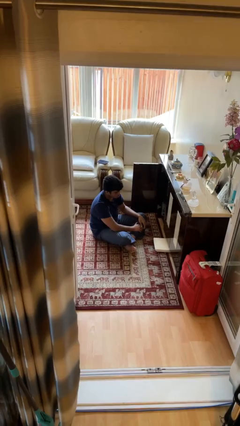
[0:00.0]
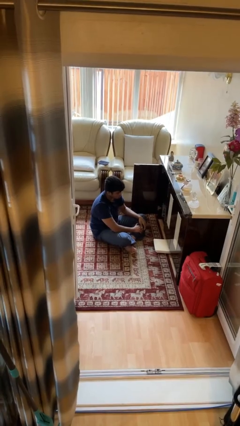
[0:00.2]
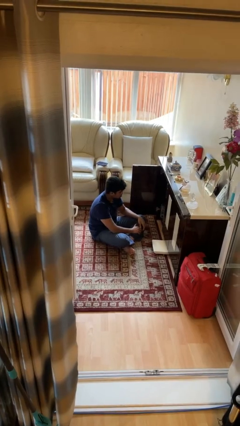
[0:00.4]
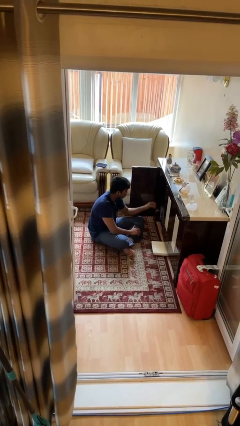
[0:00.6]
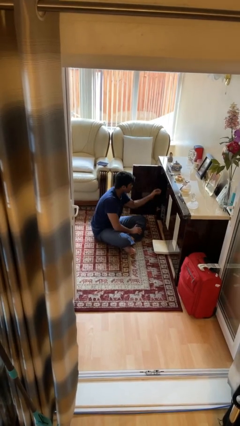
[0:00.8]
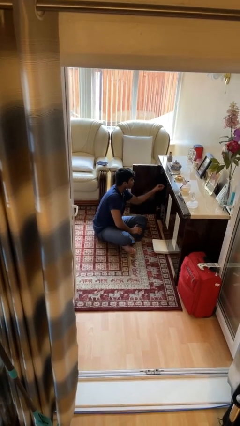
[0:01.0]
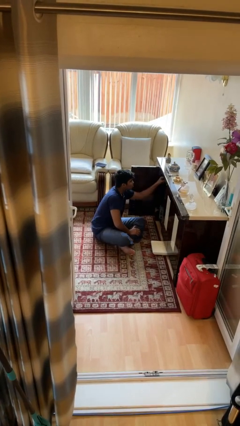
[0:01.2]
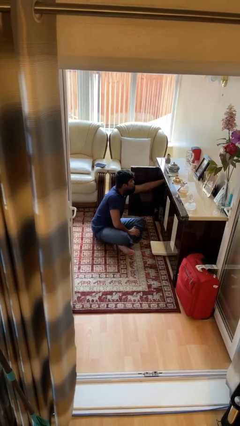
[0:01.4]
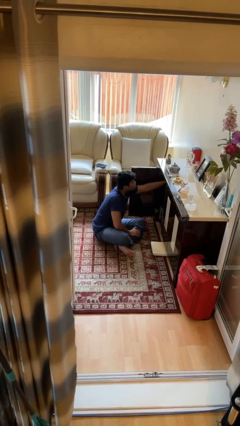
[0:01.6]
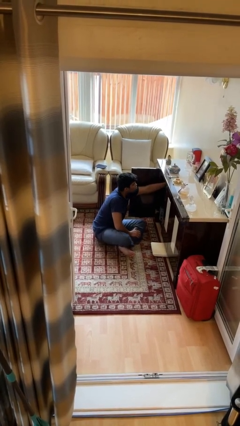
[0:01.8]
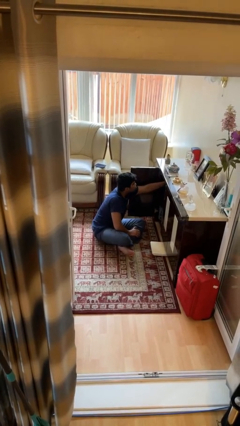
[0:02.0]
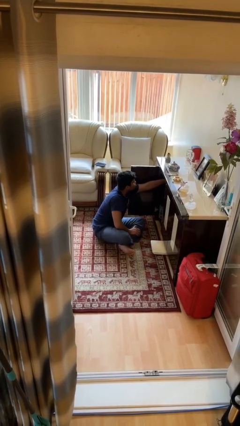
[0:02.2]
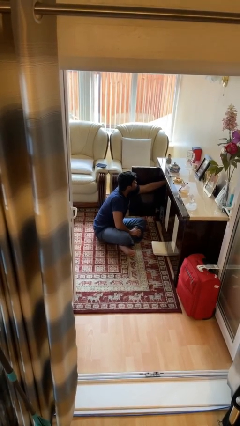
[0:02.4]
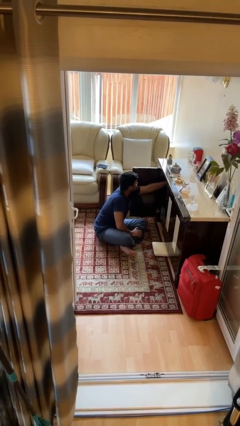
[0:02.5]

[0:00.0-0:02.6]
person searches in cabinet

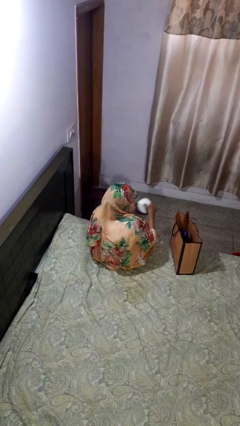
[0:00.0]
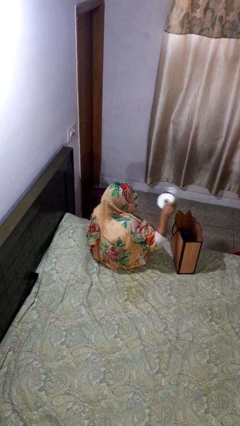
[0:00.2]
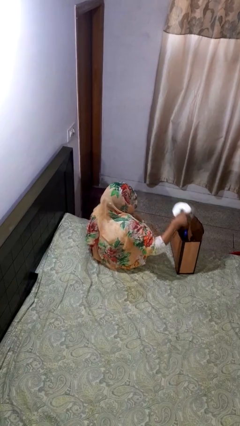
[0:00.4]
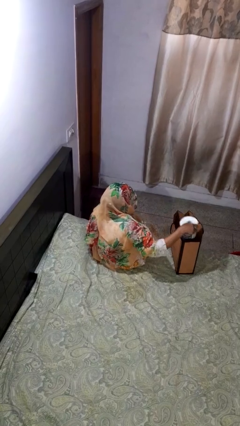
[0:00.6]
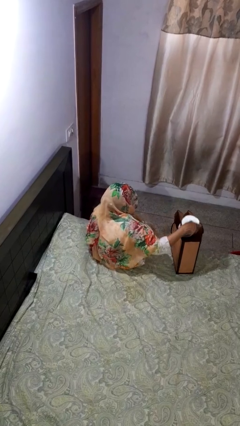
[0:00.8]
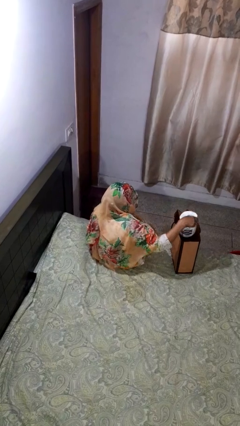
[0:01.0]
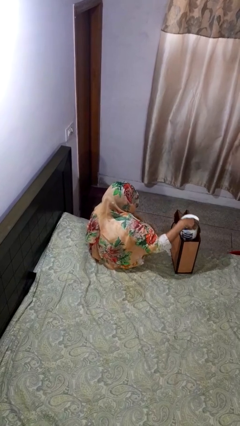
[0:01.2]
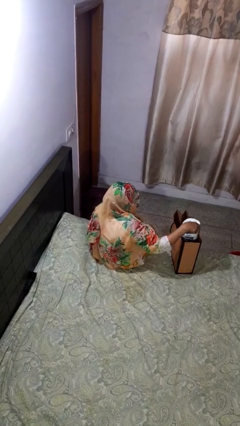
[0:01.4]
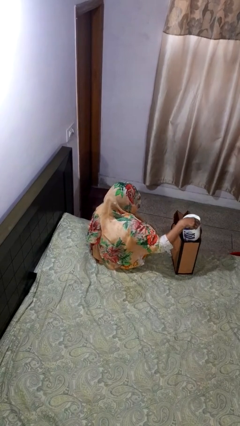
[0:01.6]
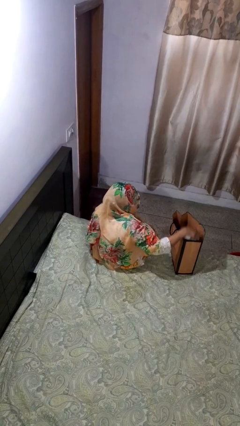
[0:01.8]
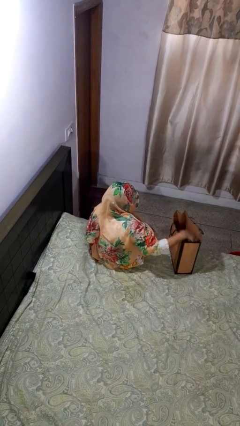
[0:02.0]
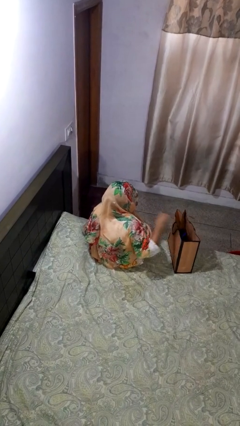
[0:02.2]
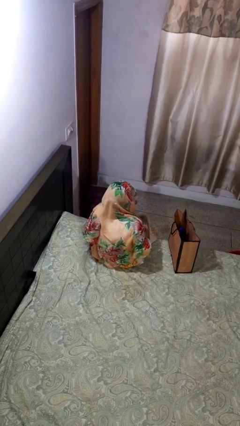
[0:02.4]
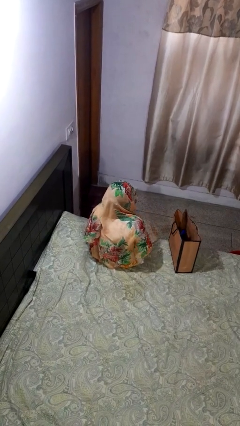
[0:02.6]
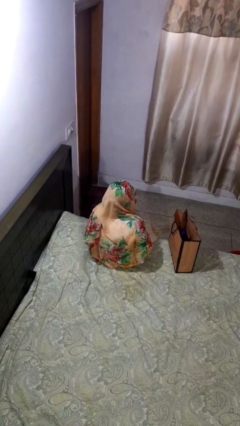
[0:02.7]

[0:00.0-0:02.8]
person puts object into bag

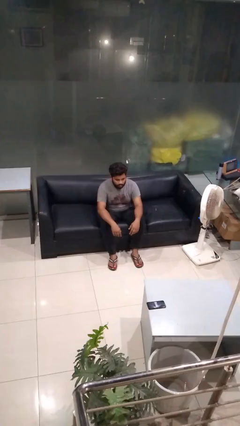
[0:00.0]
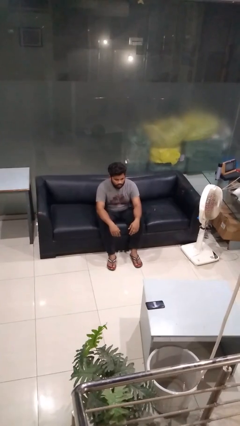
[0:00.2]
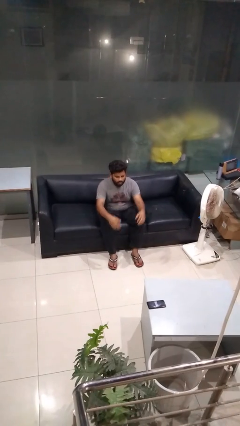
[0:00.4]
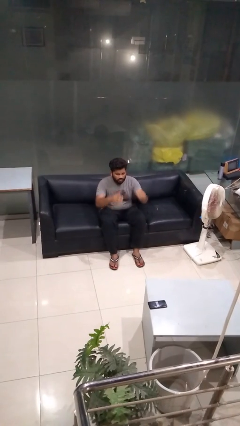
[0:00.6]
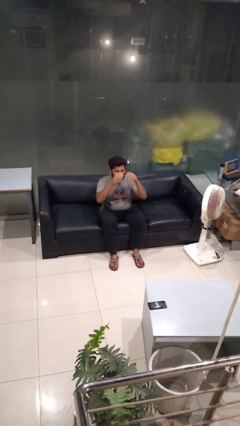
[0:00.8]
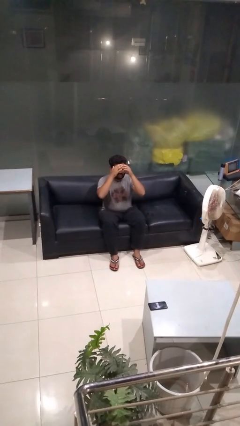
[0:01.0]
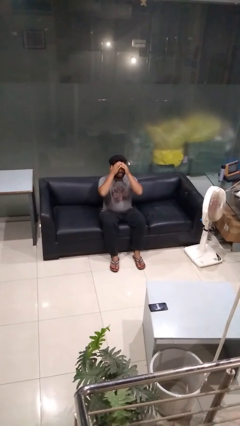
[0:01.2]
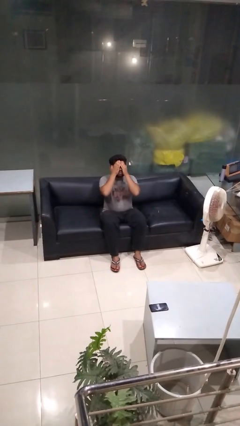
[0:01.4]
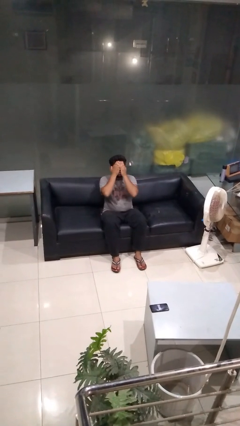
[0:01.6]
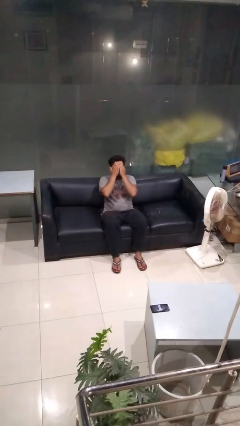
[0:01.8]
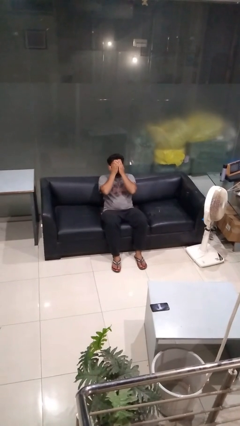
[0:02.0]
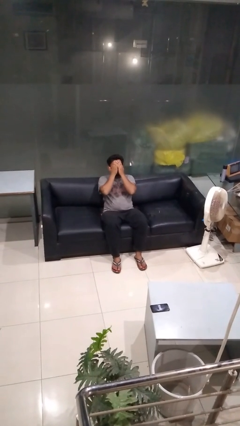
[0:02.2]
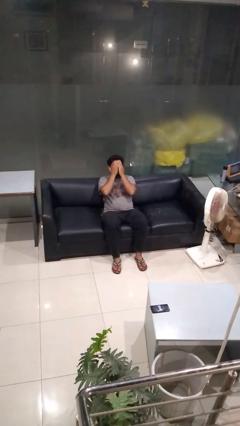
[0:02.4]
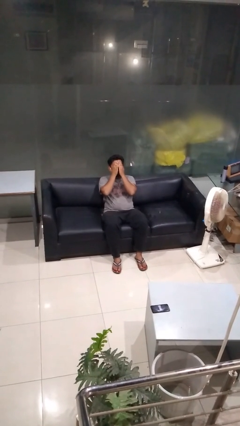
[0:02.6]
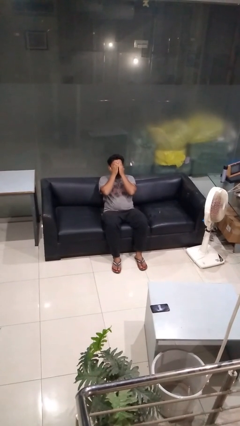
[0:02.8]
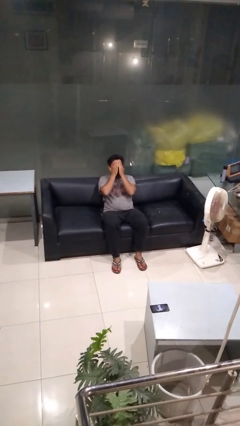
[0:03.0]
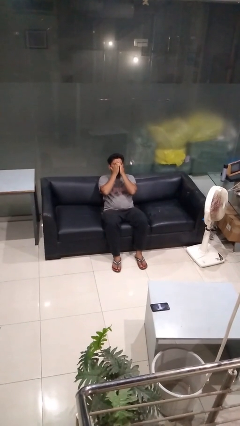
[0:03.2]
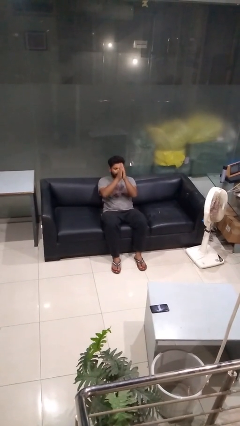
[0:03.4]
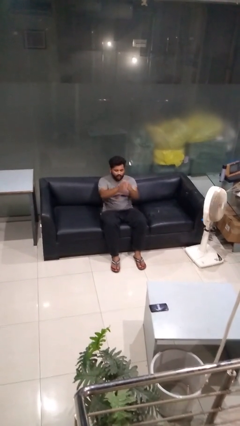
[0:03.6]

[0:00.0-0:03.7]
person covers face with hands

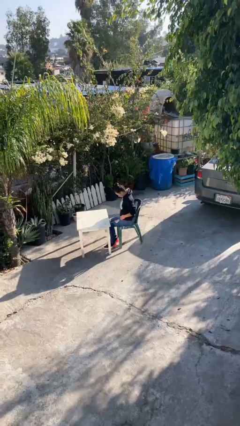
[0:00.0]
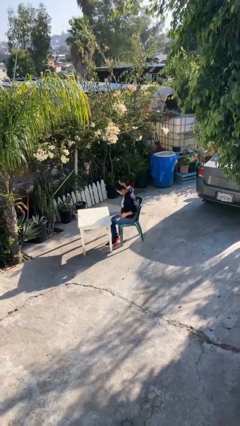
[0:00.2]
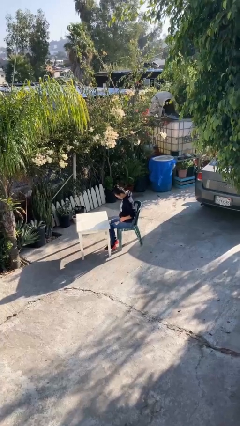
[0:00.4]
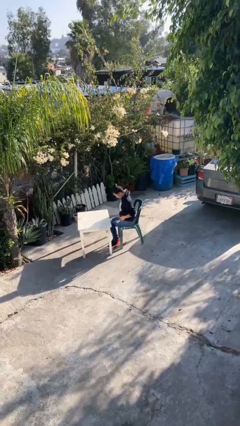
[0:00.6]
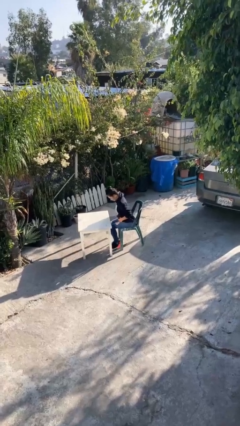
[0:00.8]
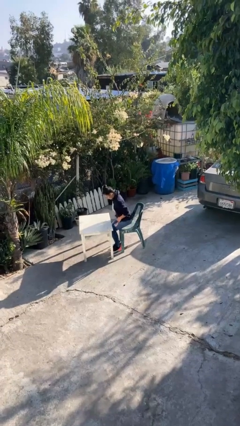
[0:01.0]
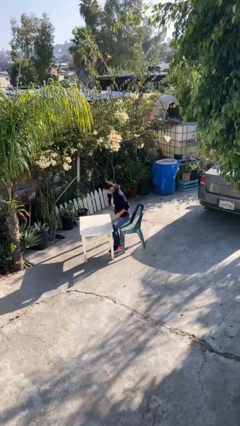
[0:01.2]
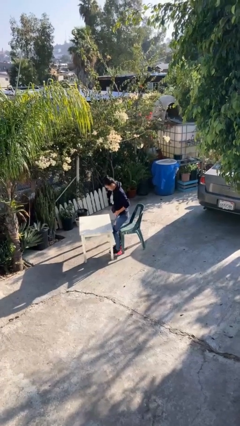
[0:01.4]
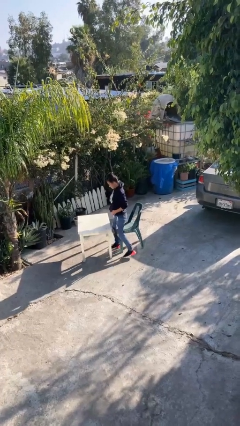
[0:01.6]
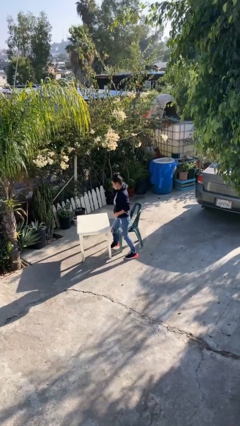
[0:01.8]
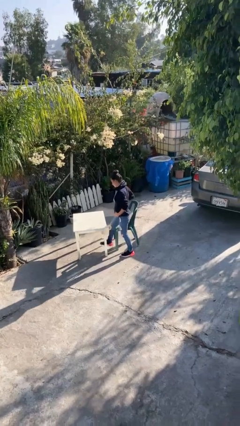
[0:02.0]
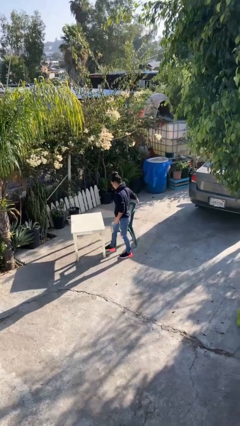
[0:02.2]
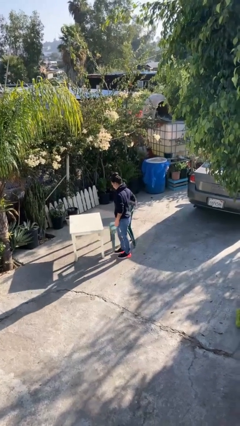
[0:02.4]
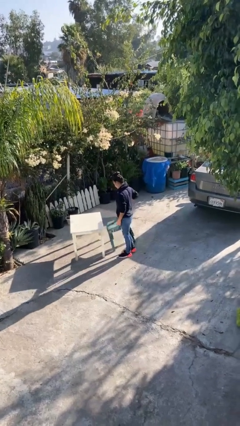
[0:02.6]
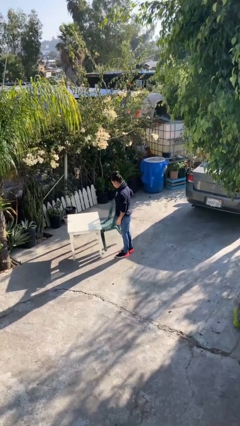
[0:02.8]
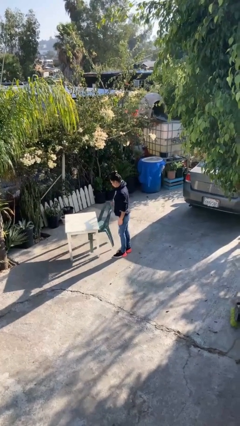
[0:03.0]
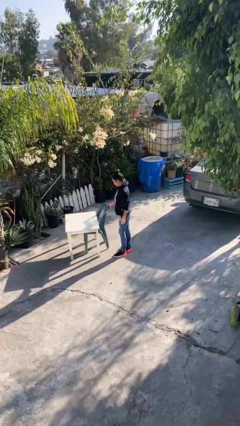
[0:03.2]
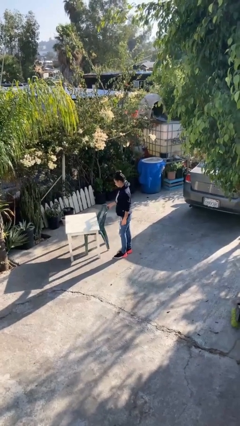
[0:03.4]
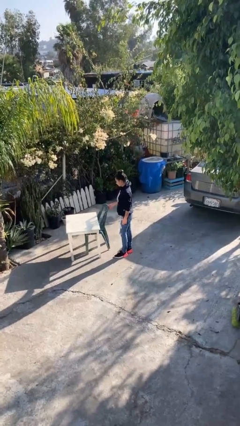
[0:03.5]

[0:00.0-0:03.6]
person stands up

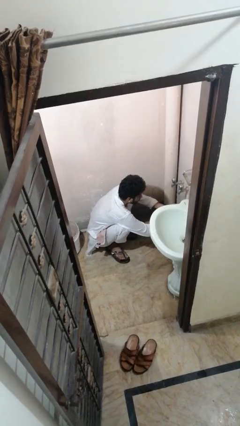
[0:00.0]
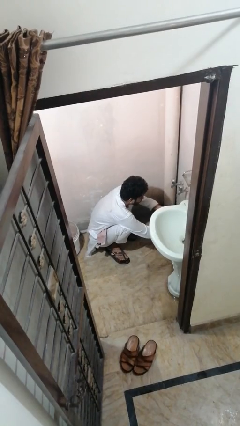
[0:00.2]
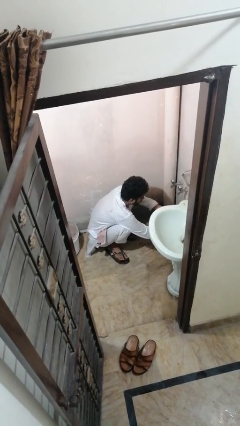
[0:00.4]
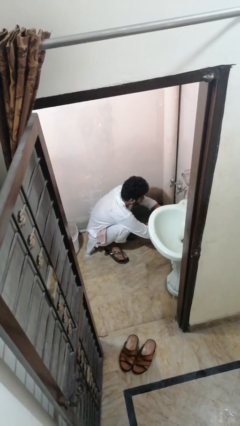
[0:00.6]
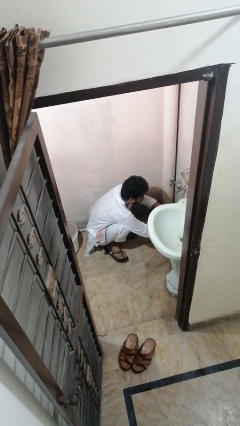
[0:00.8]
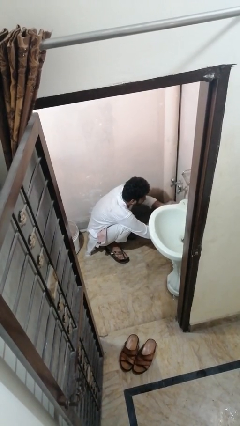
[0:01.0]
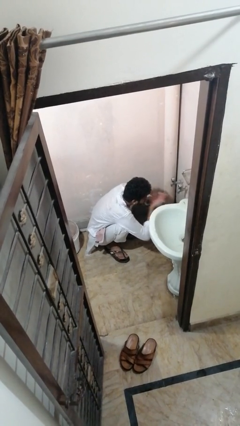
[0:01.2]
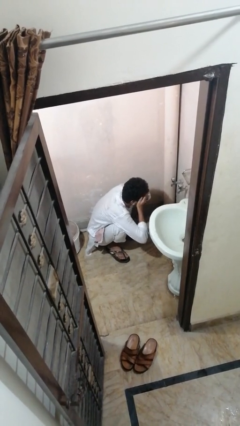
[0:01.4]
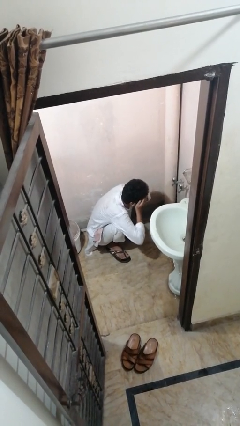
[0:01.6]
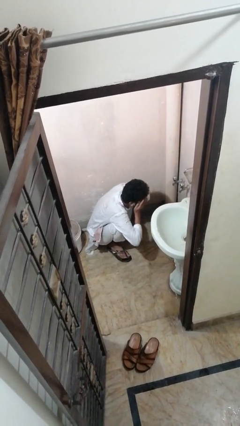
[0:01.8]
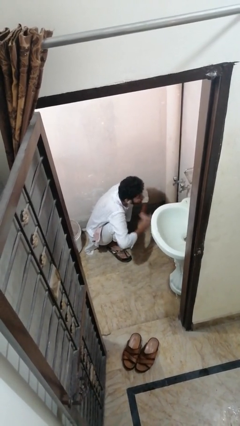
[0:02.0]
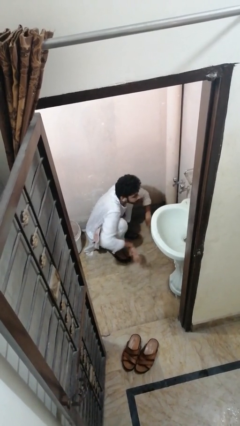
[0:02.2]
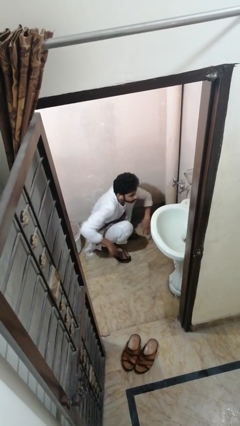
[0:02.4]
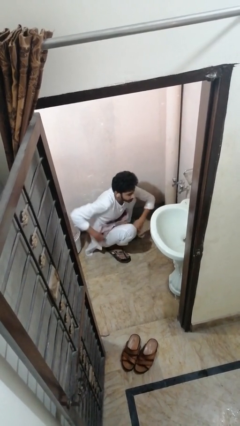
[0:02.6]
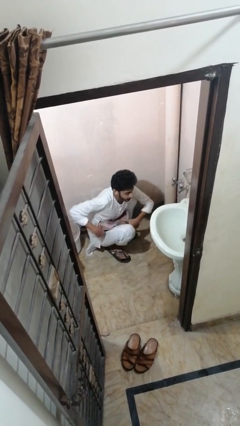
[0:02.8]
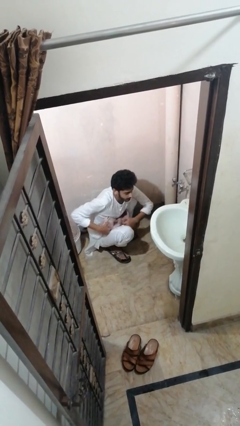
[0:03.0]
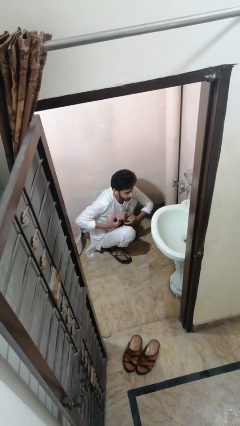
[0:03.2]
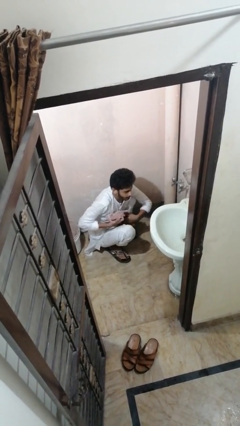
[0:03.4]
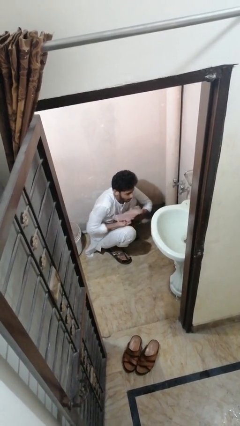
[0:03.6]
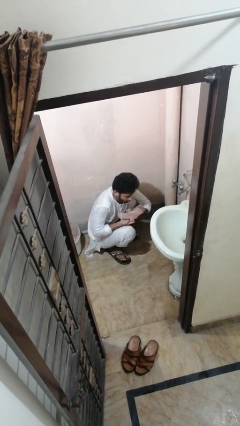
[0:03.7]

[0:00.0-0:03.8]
person washes face

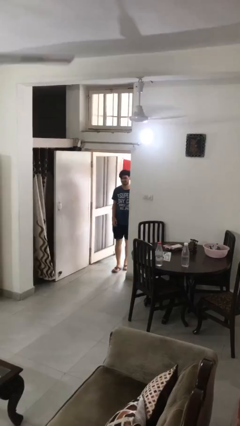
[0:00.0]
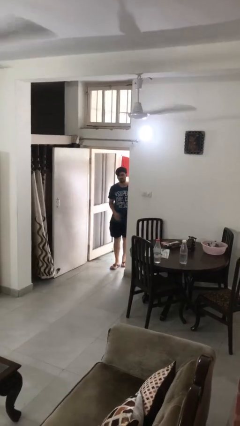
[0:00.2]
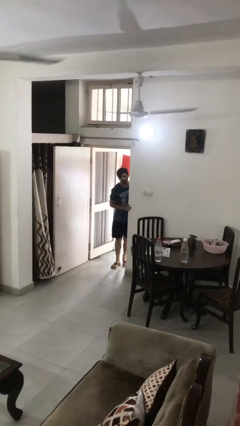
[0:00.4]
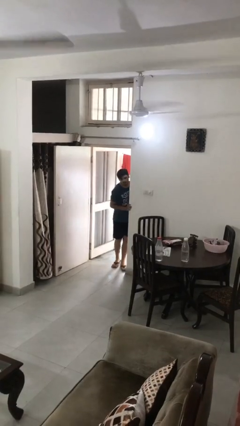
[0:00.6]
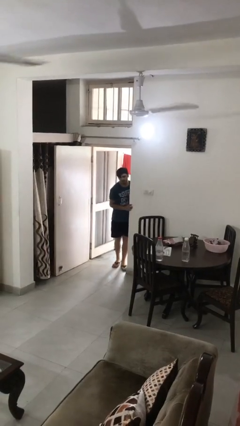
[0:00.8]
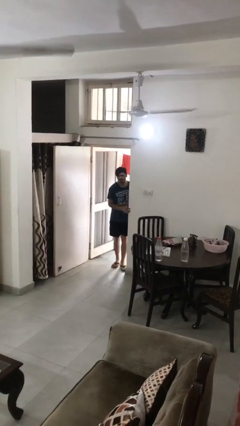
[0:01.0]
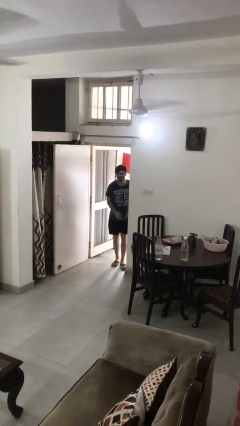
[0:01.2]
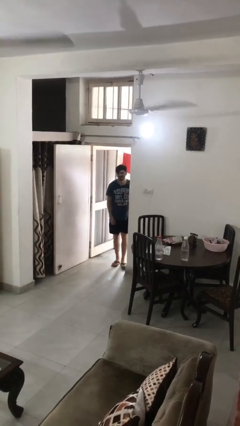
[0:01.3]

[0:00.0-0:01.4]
person bumps into wall

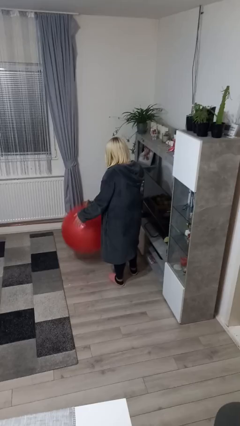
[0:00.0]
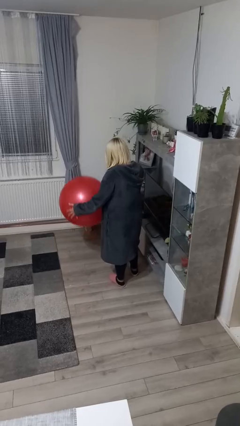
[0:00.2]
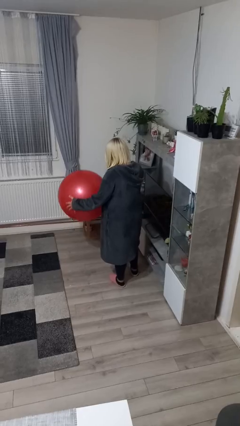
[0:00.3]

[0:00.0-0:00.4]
person bounces ball on floor
